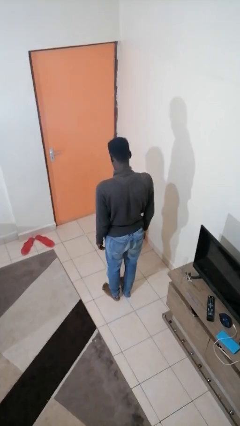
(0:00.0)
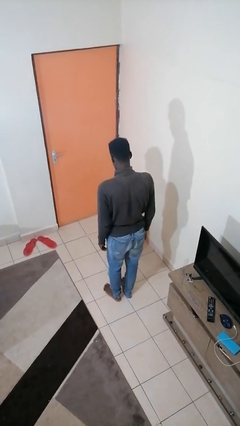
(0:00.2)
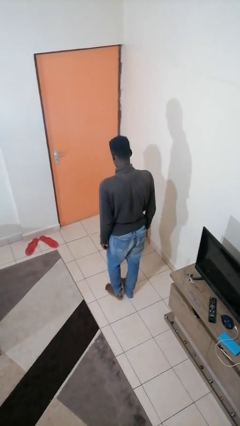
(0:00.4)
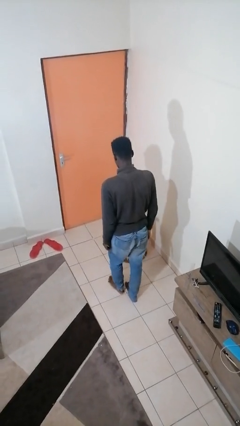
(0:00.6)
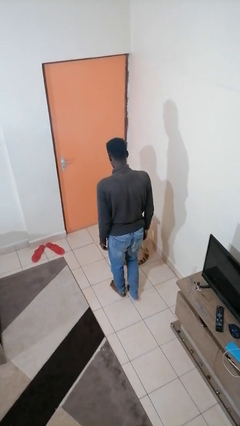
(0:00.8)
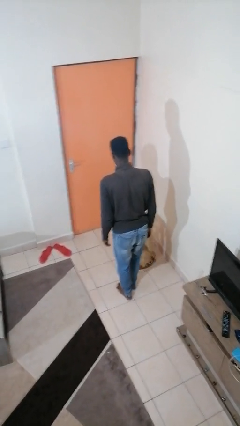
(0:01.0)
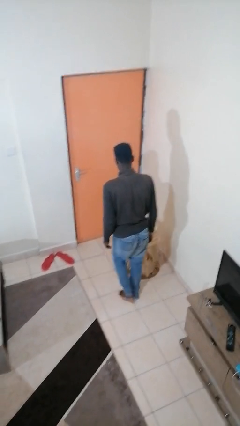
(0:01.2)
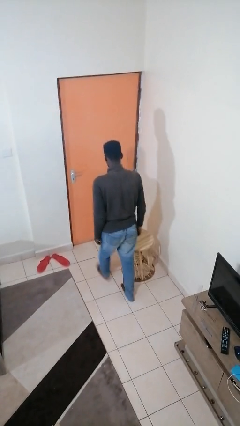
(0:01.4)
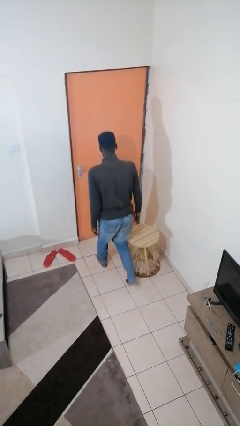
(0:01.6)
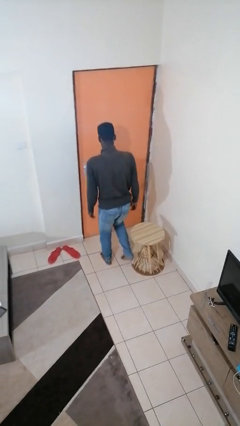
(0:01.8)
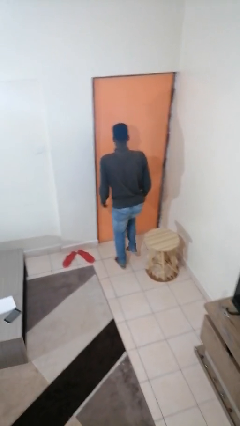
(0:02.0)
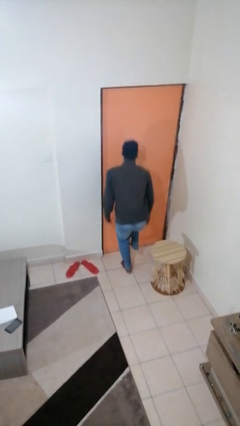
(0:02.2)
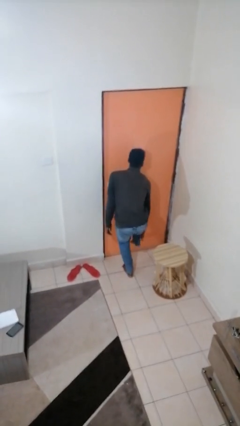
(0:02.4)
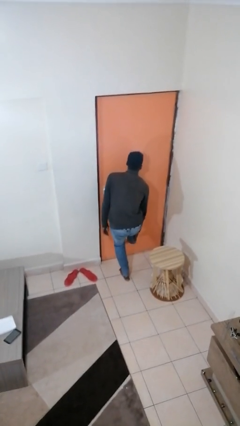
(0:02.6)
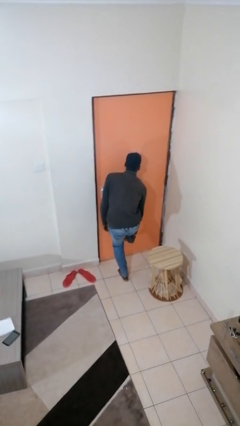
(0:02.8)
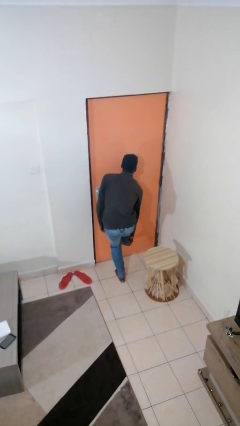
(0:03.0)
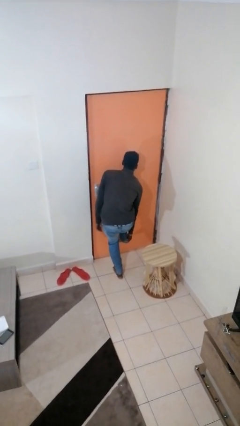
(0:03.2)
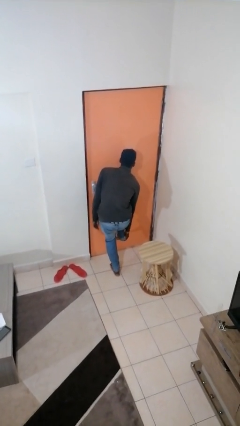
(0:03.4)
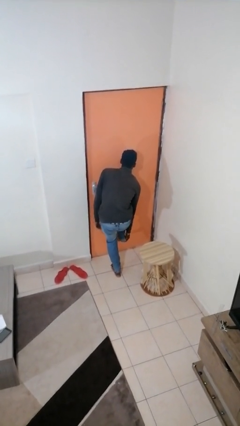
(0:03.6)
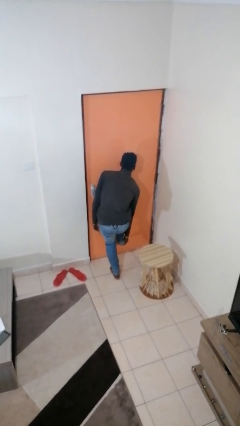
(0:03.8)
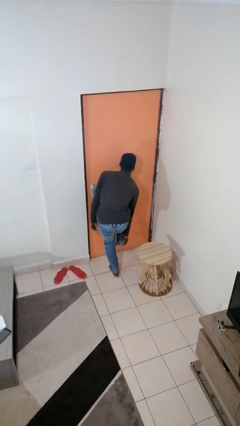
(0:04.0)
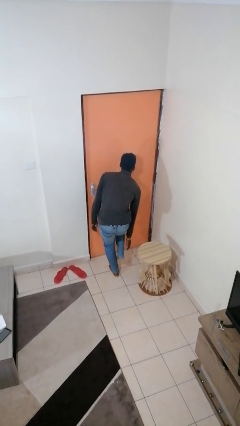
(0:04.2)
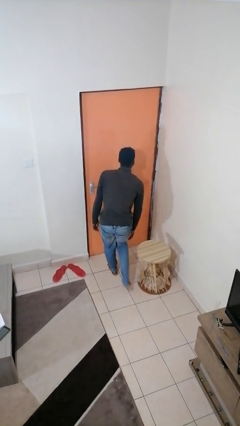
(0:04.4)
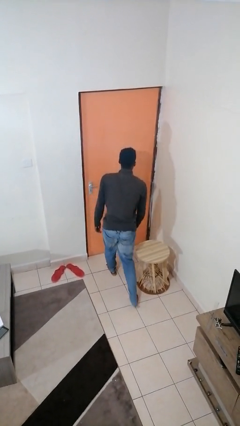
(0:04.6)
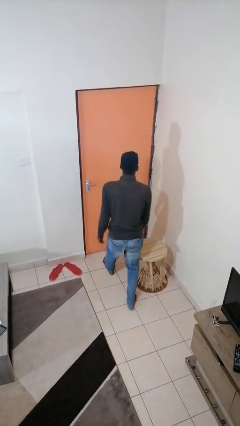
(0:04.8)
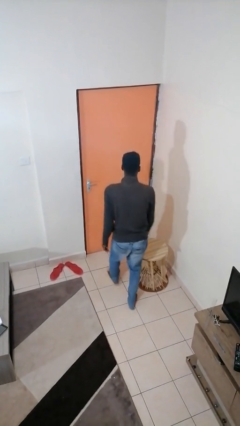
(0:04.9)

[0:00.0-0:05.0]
person stubs toe

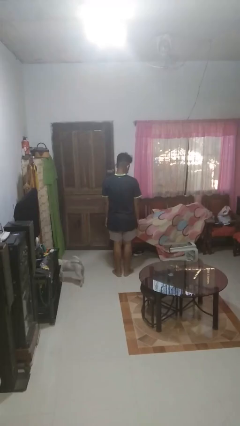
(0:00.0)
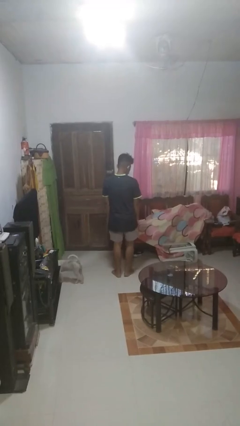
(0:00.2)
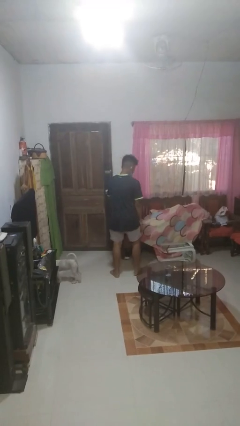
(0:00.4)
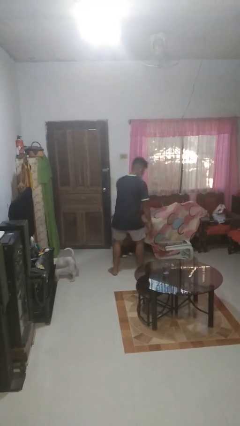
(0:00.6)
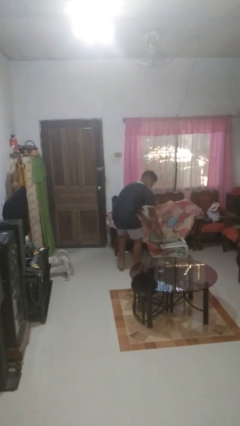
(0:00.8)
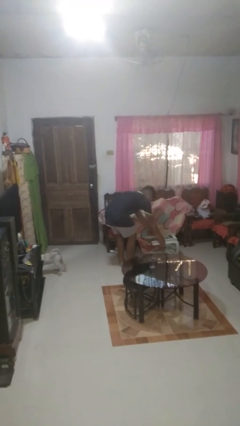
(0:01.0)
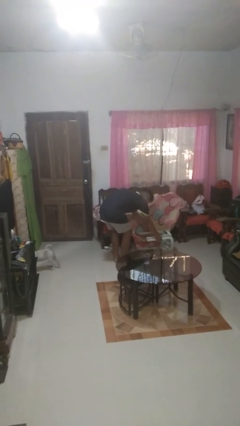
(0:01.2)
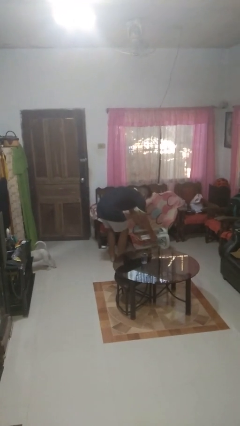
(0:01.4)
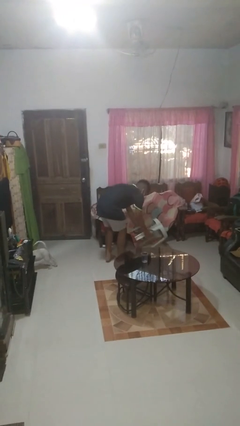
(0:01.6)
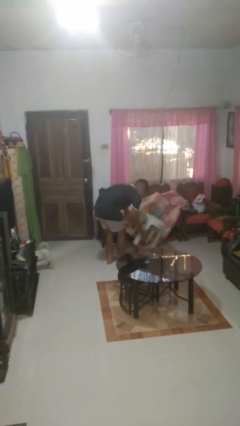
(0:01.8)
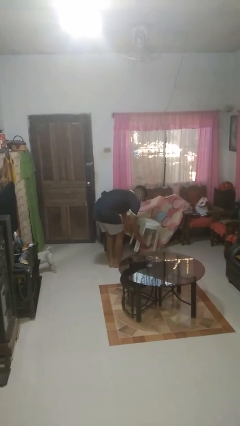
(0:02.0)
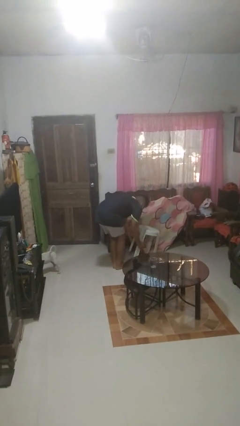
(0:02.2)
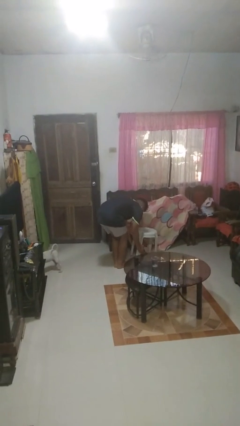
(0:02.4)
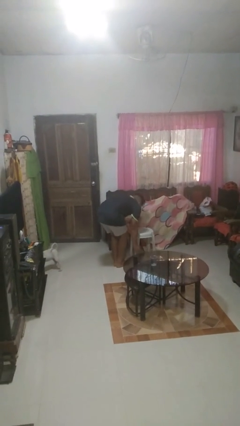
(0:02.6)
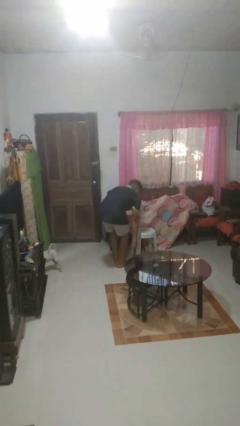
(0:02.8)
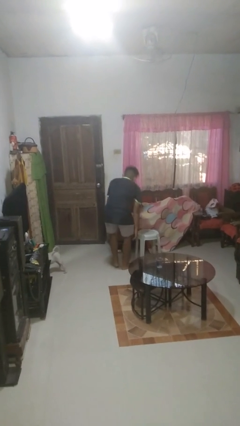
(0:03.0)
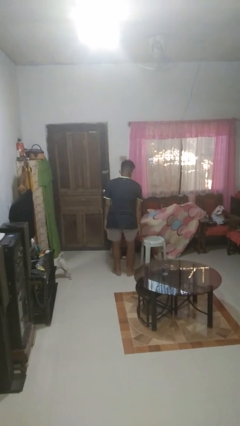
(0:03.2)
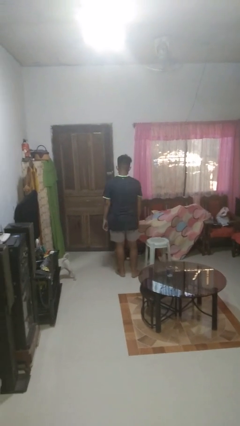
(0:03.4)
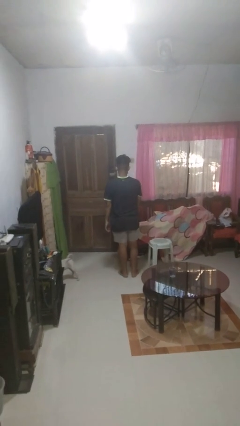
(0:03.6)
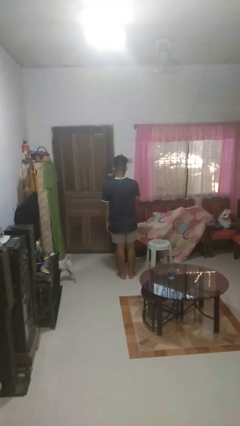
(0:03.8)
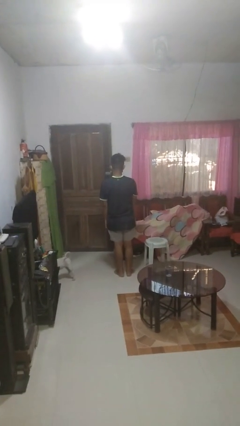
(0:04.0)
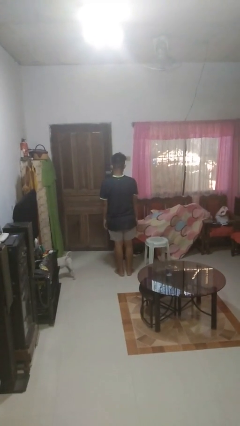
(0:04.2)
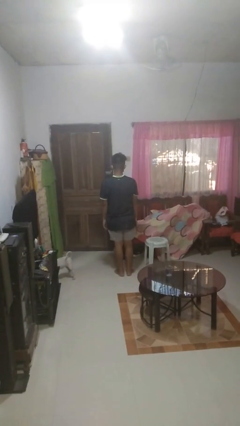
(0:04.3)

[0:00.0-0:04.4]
person sets upright furniture

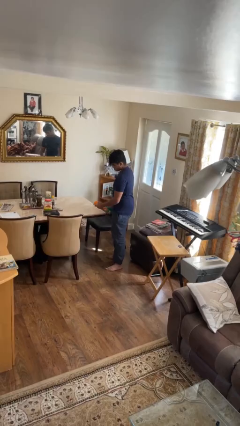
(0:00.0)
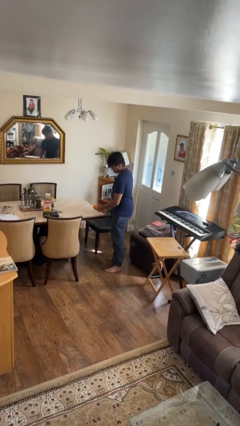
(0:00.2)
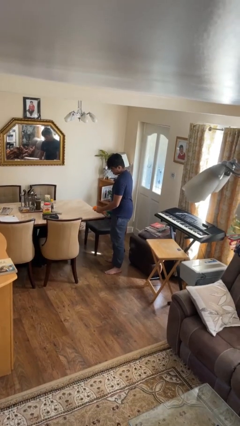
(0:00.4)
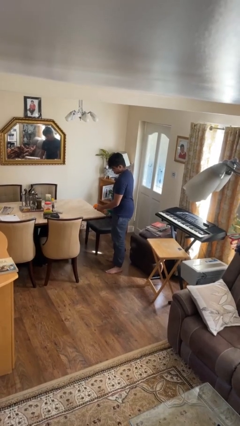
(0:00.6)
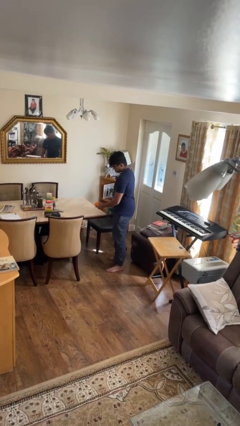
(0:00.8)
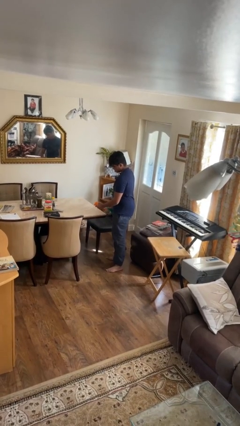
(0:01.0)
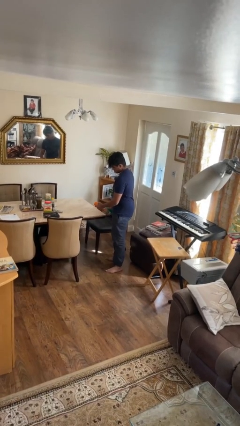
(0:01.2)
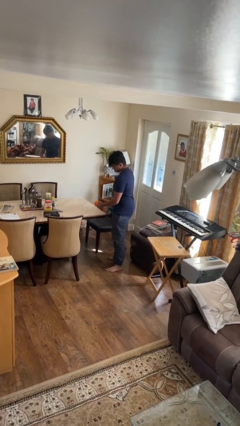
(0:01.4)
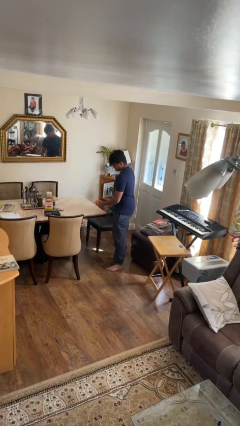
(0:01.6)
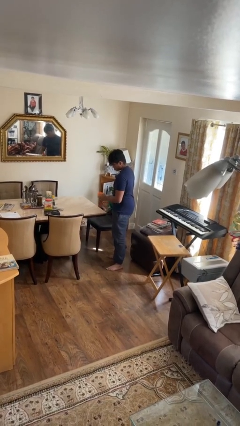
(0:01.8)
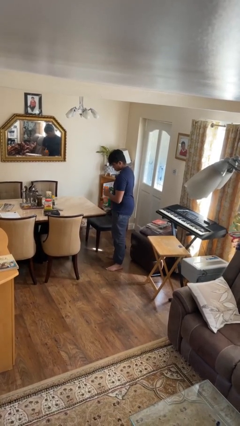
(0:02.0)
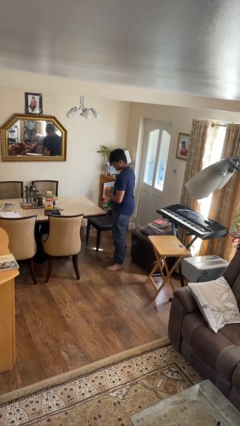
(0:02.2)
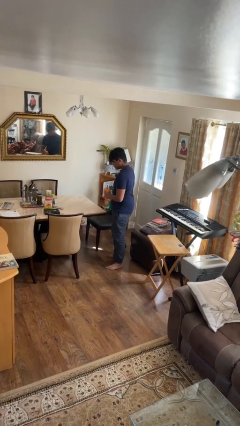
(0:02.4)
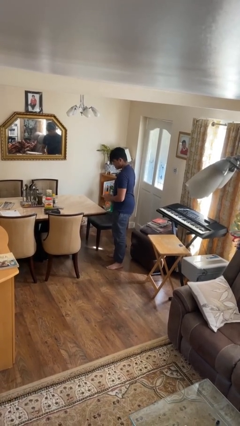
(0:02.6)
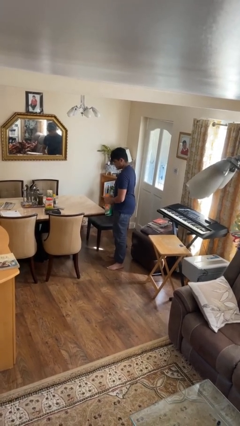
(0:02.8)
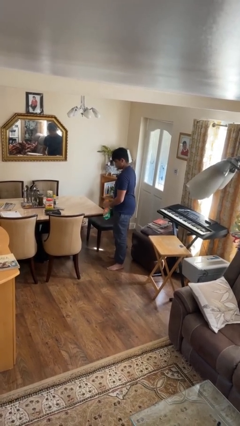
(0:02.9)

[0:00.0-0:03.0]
person sprays from bottle

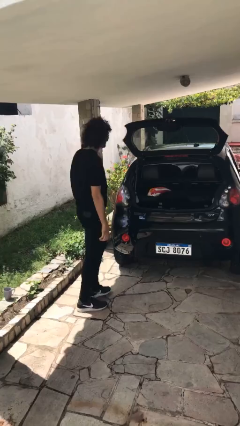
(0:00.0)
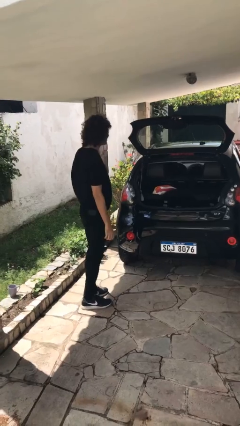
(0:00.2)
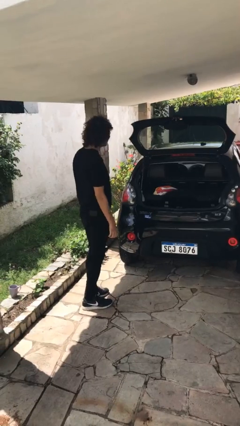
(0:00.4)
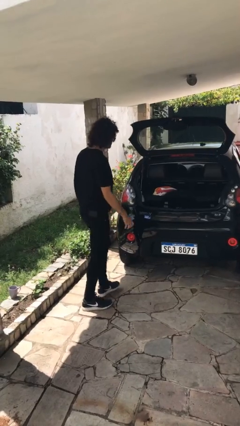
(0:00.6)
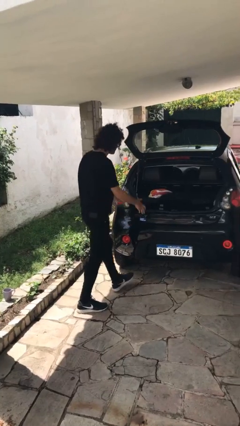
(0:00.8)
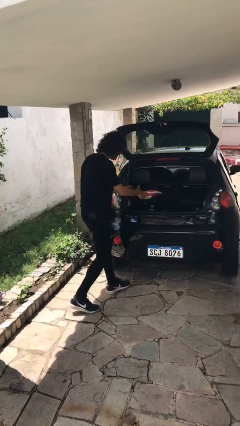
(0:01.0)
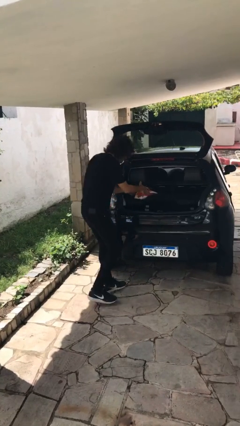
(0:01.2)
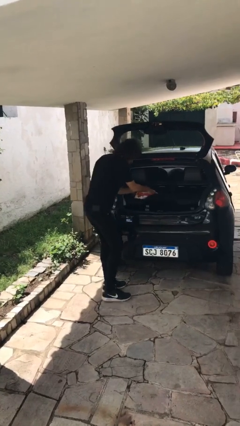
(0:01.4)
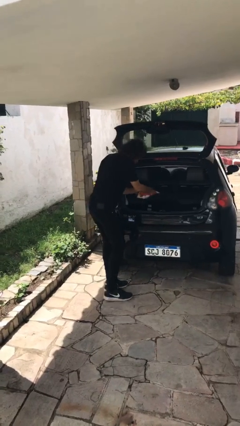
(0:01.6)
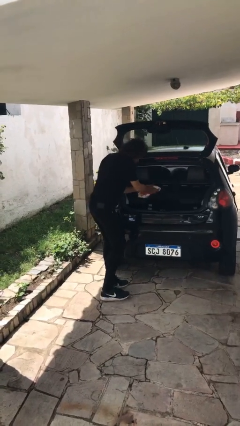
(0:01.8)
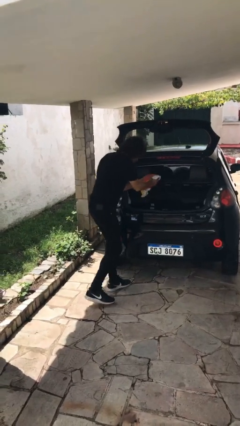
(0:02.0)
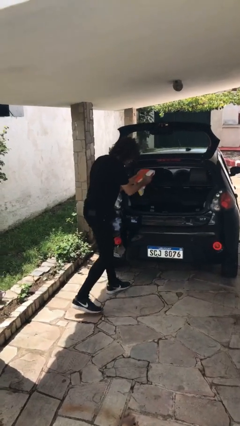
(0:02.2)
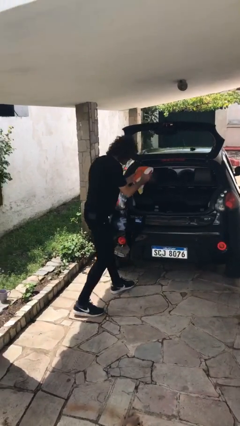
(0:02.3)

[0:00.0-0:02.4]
person unloads car

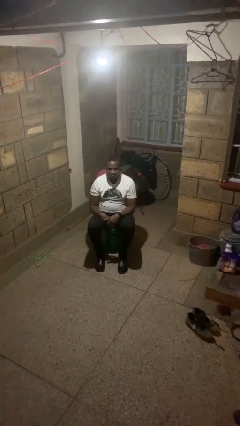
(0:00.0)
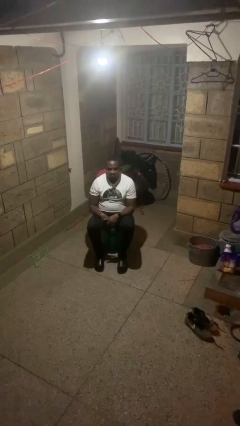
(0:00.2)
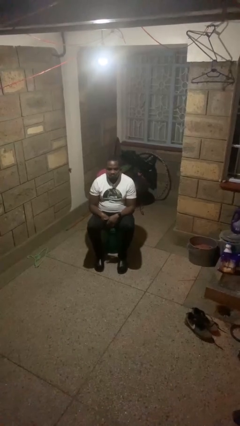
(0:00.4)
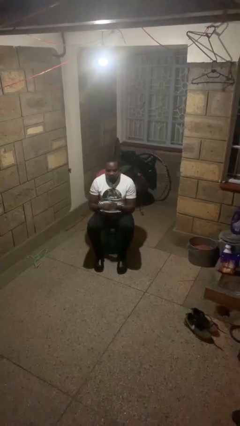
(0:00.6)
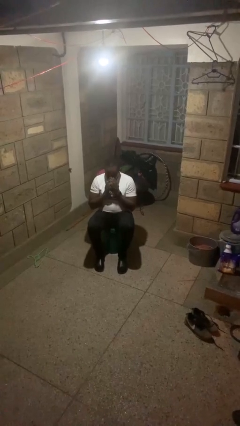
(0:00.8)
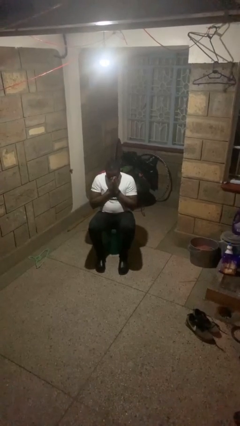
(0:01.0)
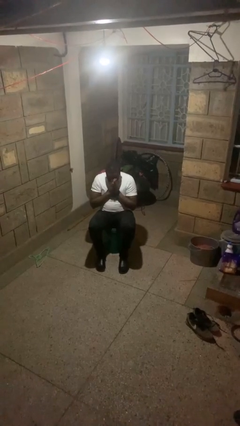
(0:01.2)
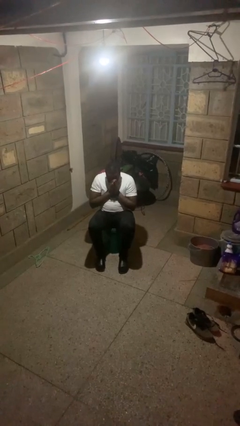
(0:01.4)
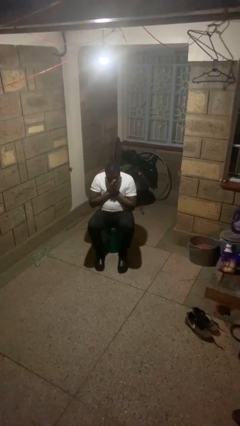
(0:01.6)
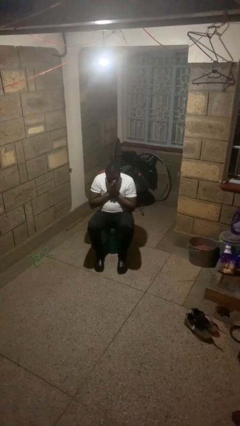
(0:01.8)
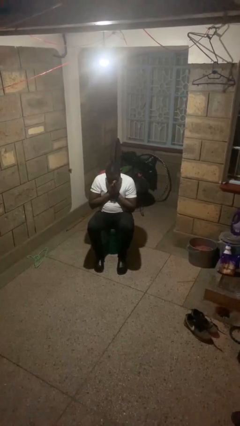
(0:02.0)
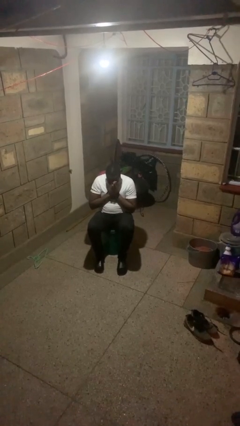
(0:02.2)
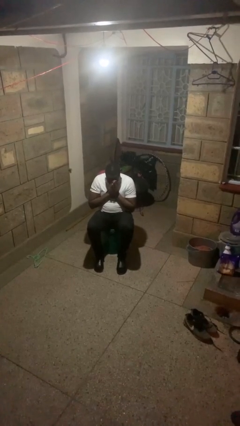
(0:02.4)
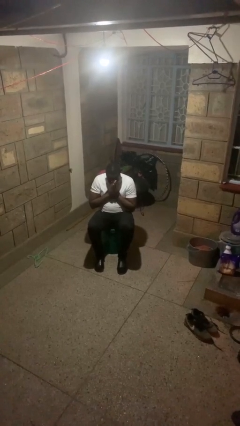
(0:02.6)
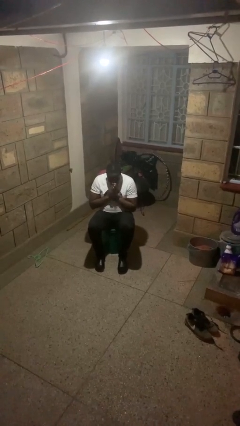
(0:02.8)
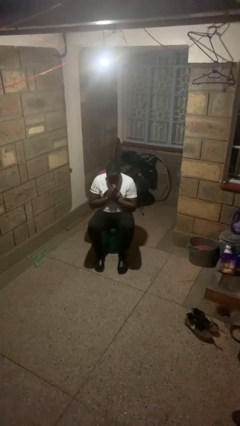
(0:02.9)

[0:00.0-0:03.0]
person sneezes into hand
